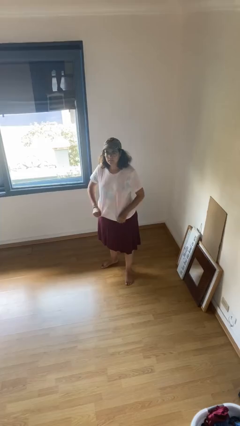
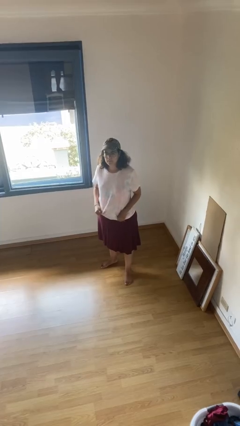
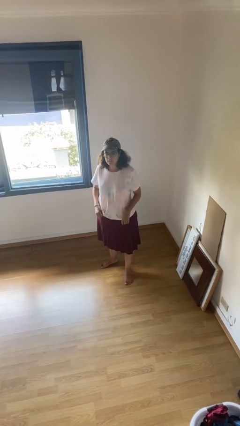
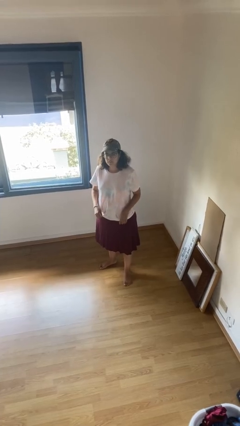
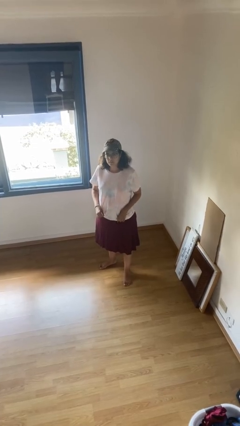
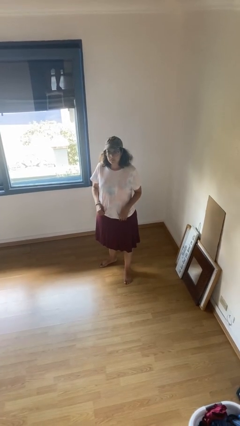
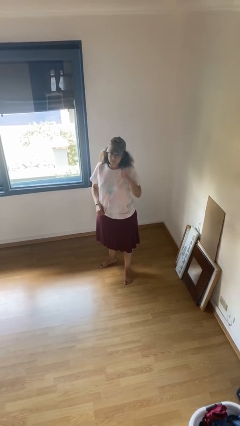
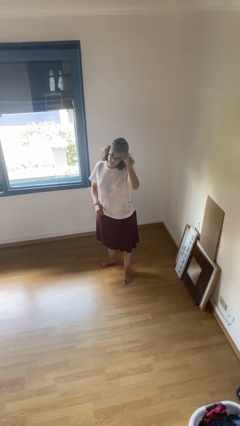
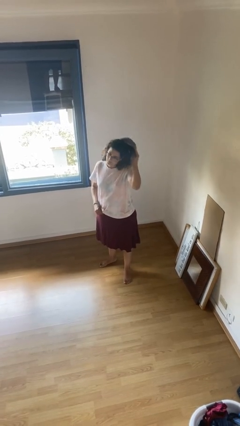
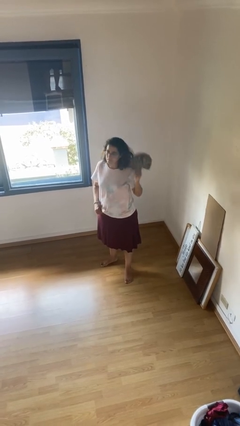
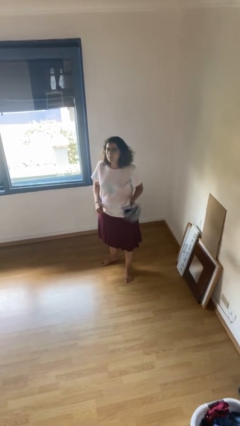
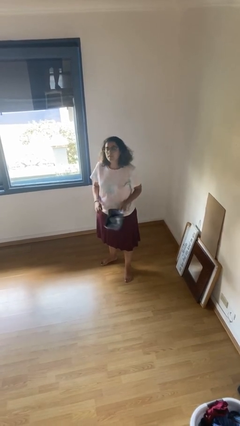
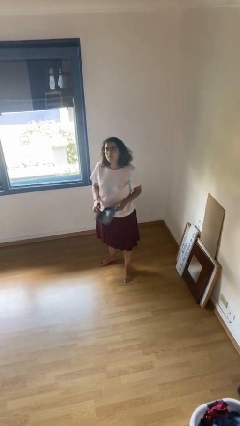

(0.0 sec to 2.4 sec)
person takes off hat

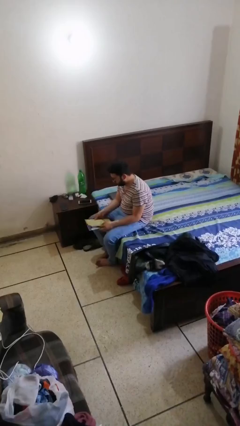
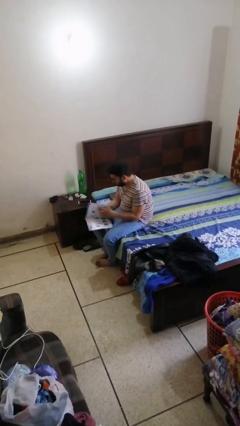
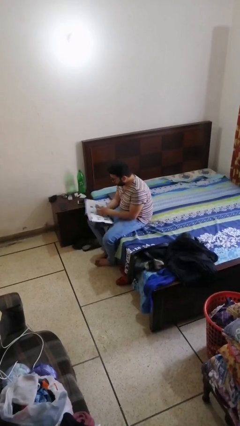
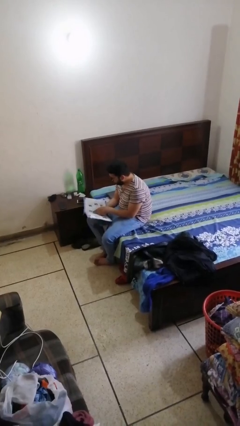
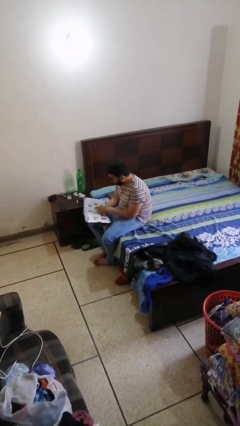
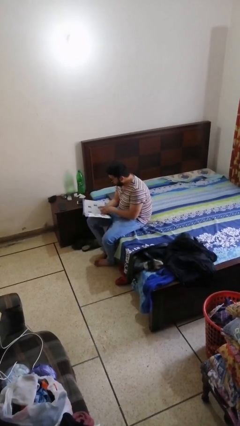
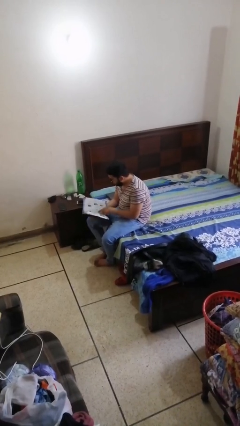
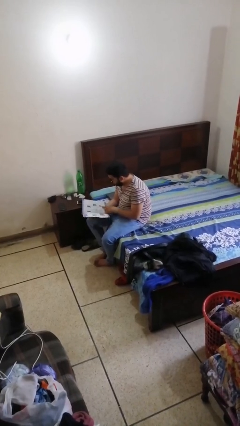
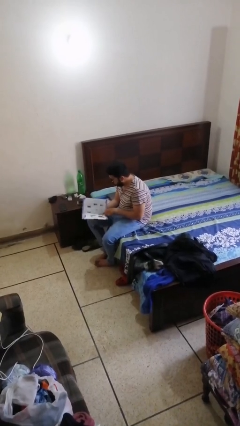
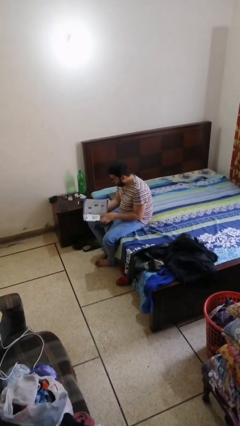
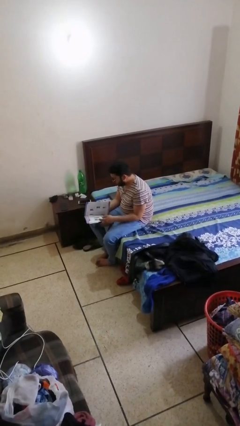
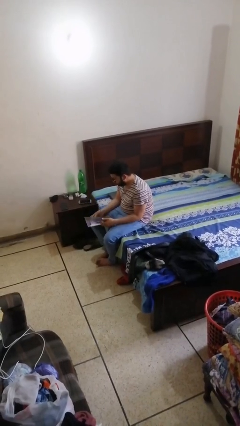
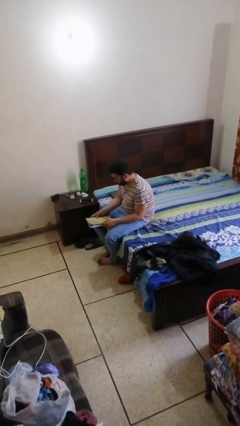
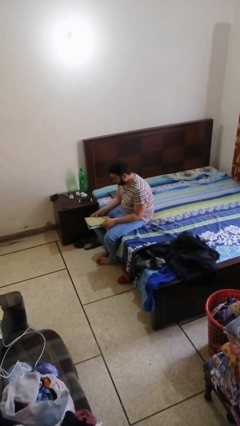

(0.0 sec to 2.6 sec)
person reads document

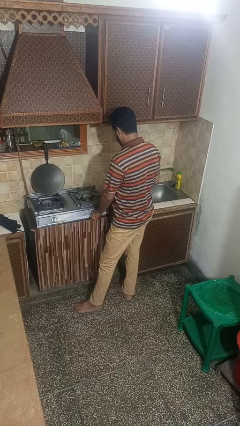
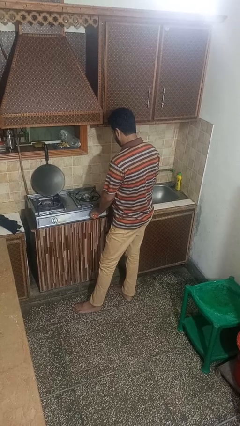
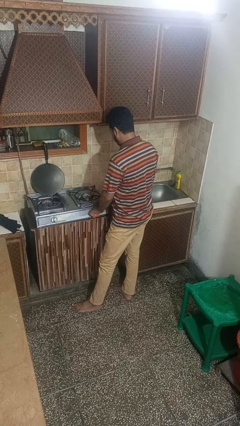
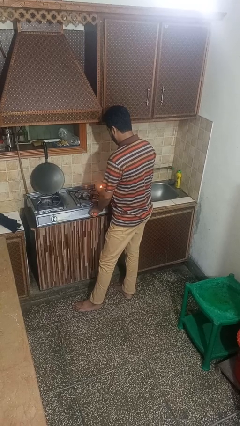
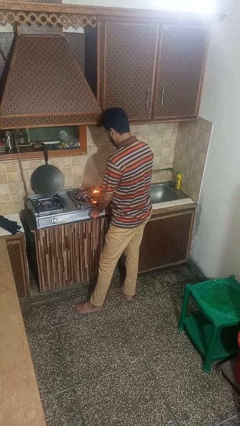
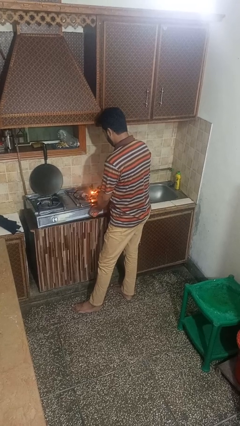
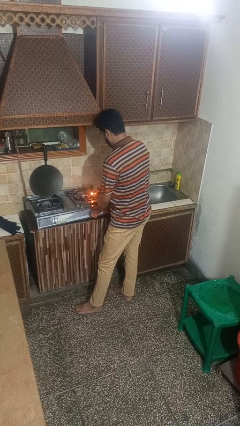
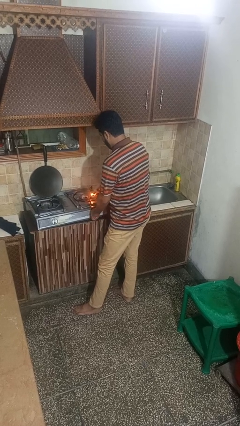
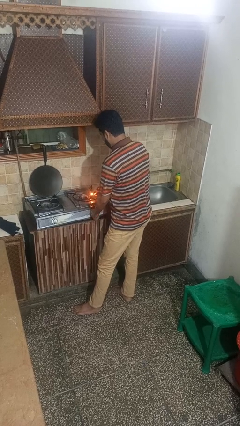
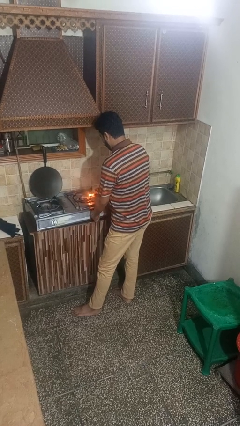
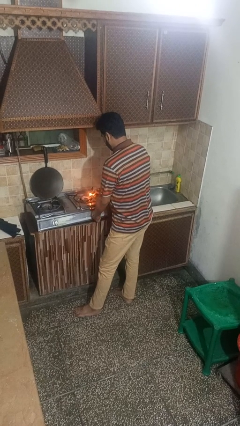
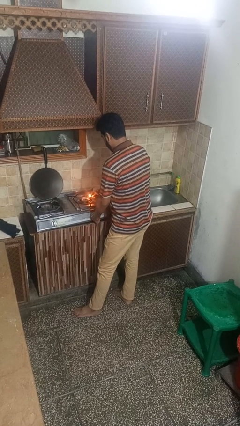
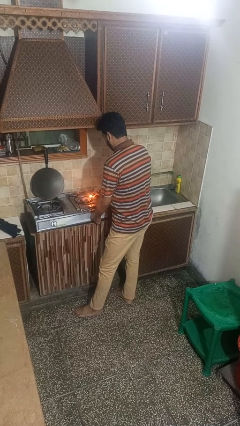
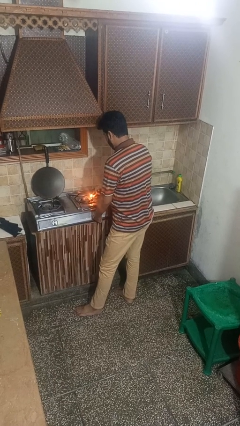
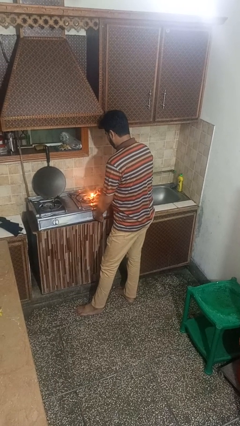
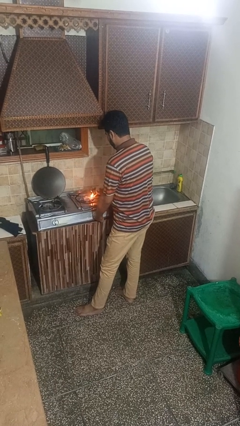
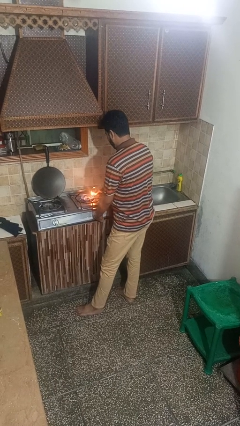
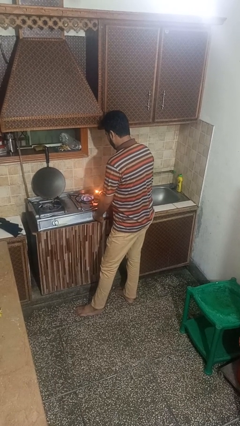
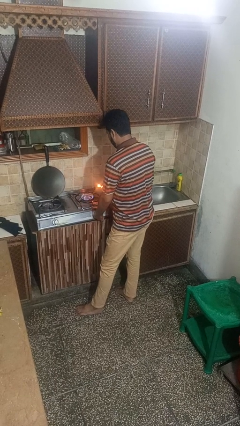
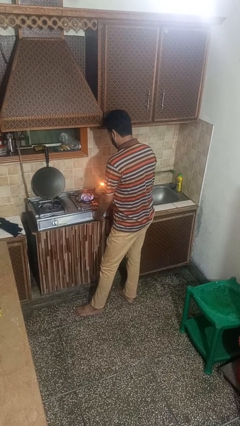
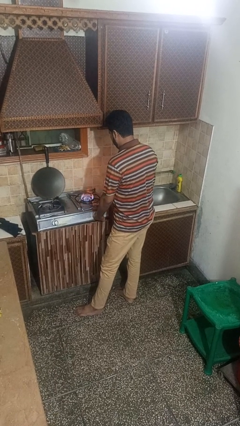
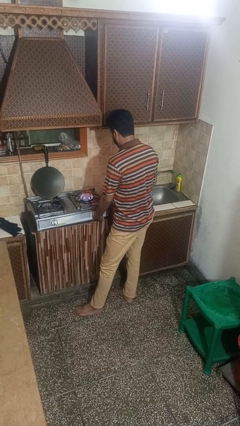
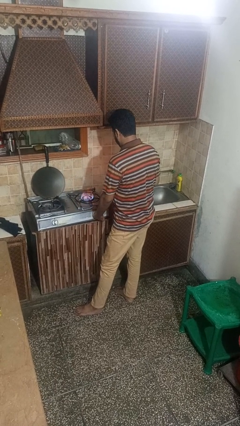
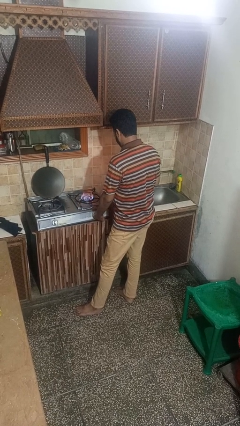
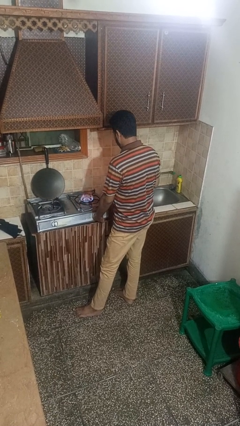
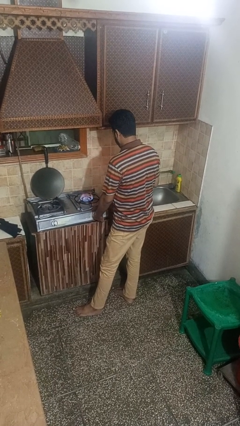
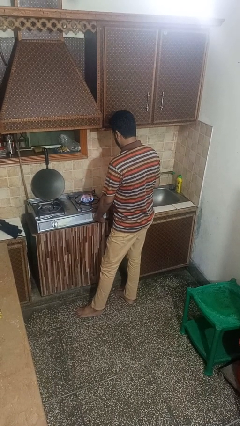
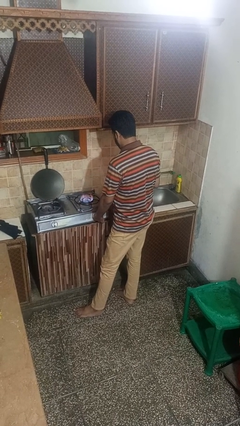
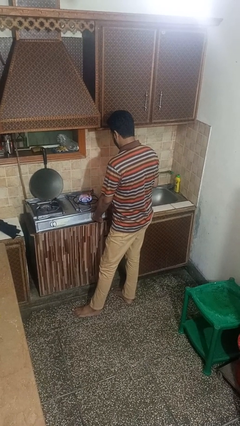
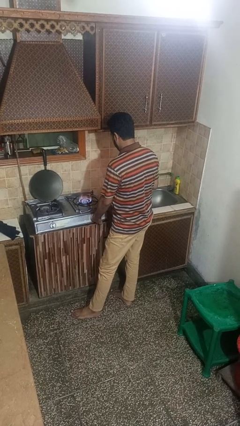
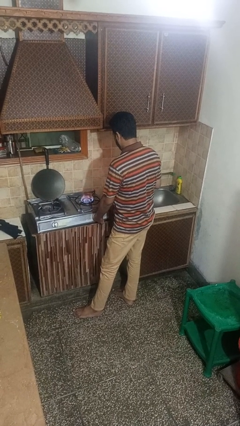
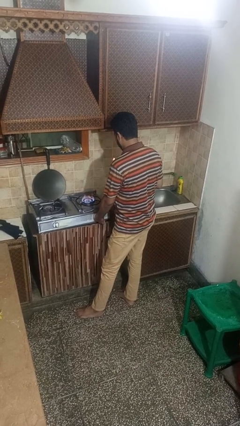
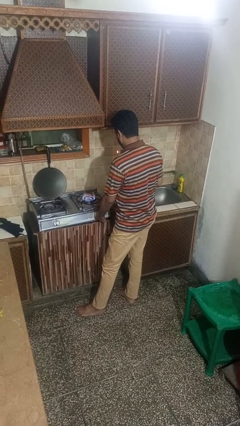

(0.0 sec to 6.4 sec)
person turns on stovetop

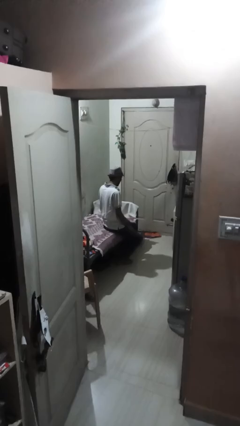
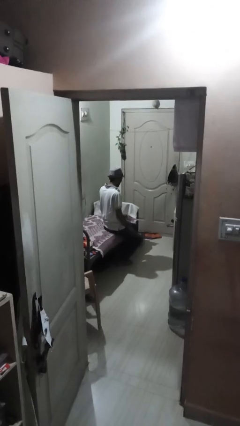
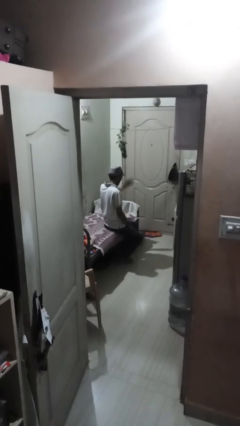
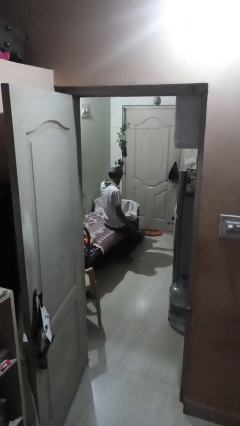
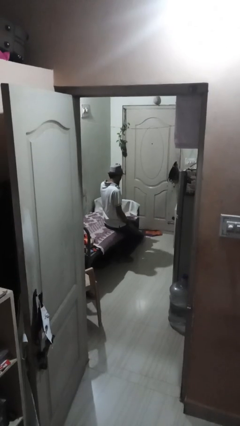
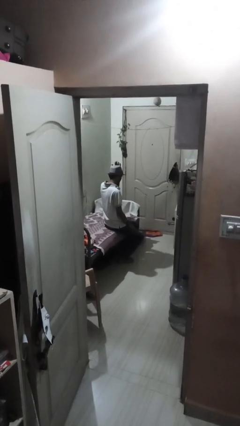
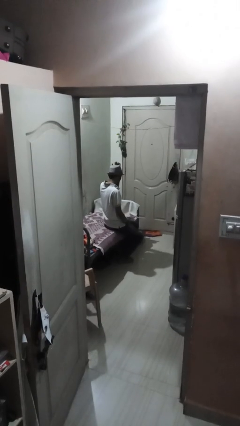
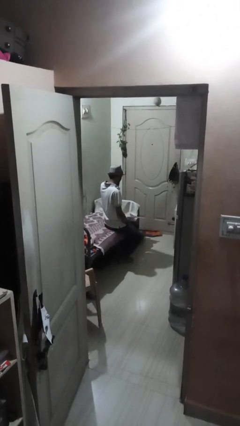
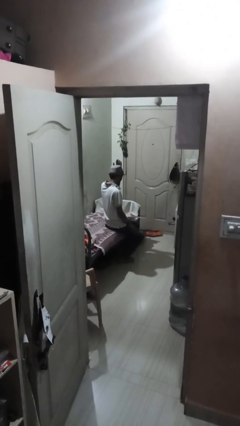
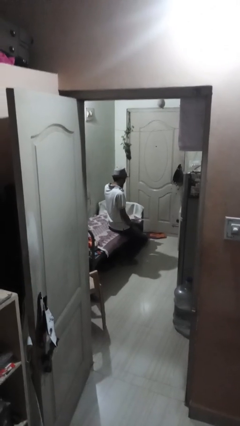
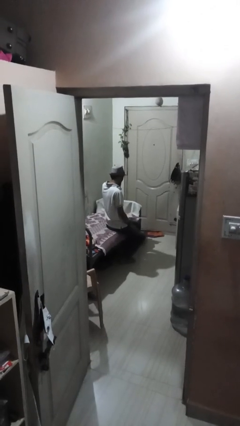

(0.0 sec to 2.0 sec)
person pats head

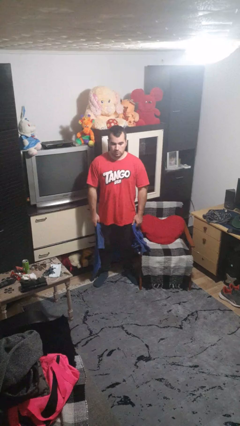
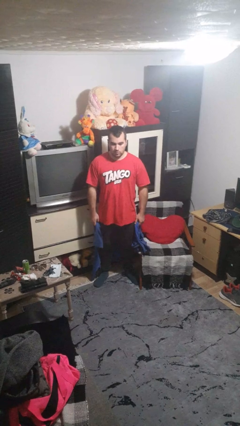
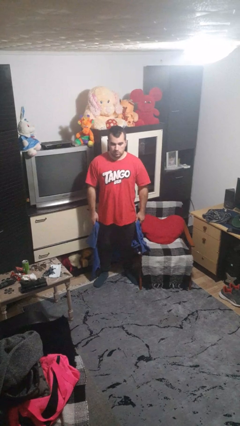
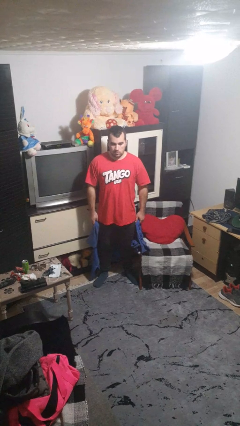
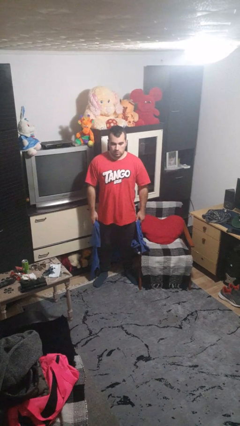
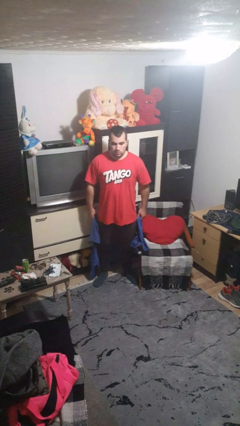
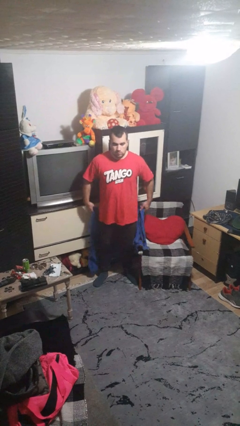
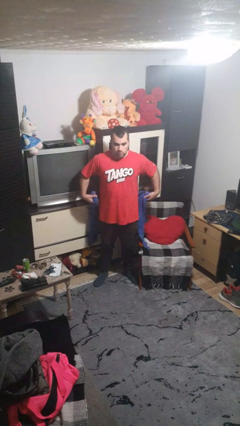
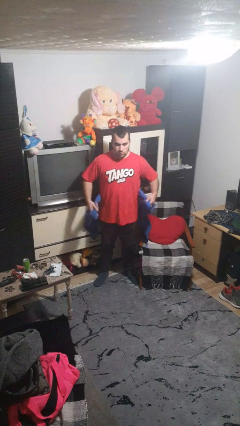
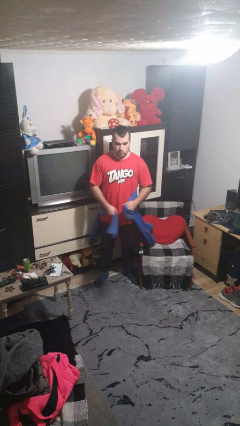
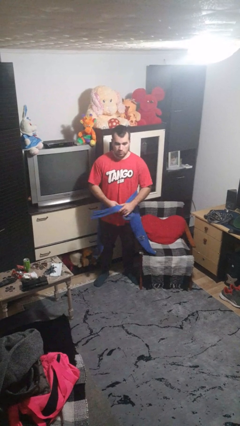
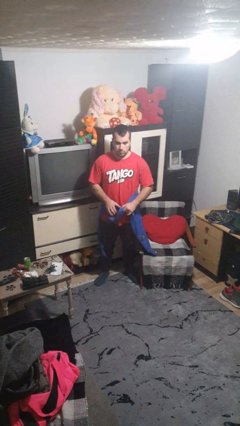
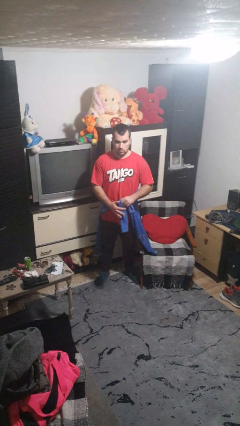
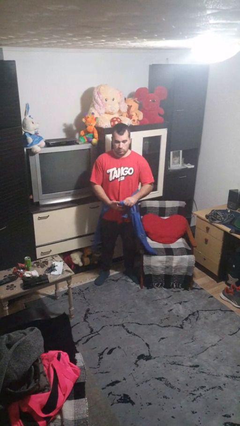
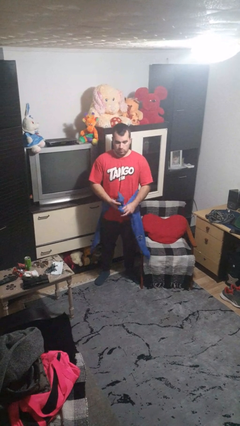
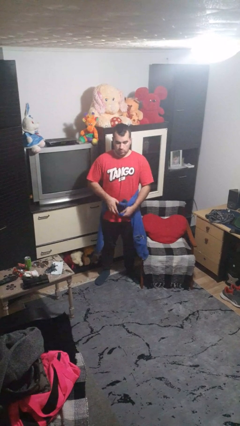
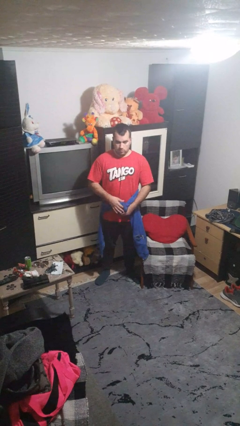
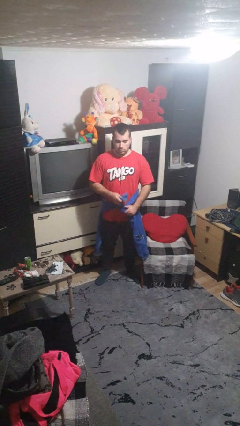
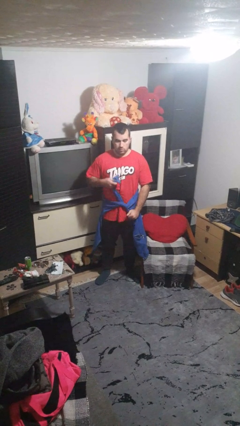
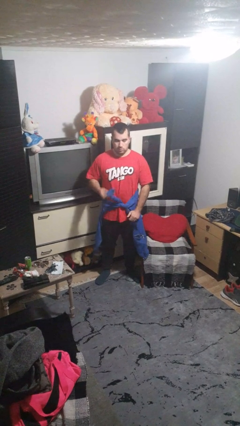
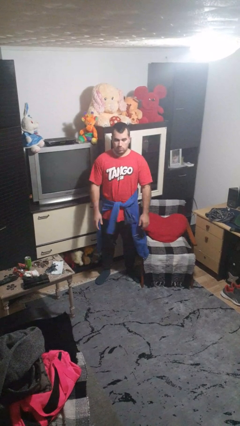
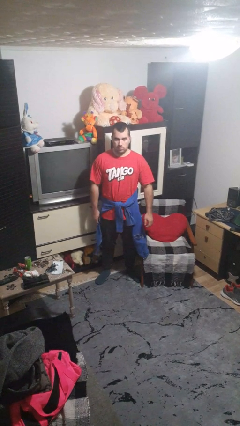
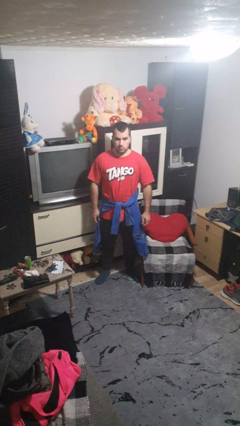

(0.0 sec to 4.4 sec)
person ties jacket around waist

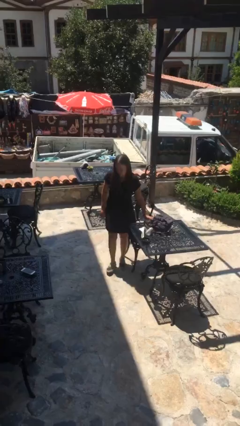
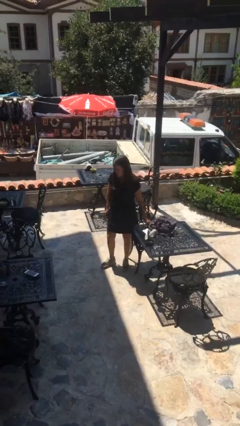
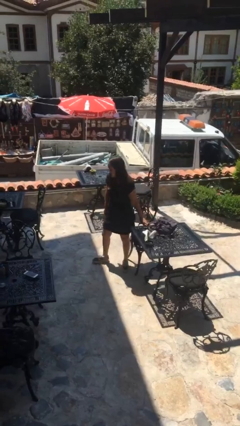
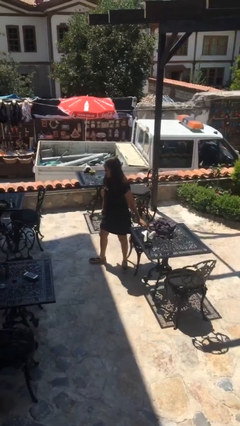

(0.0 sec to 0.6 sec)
person puts down object on table
